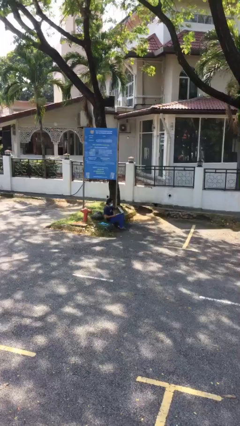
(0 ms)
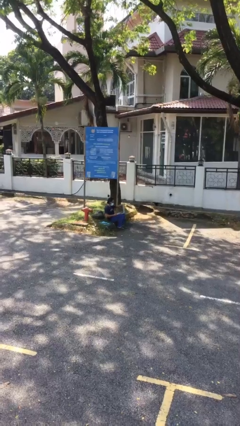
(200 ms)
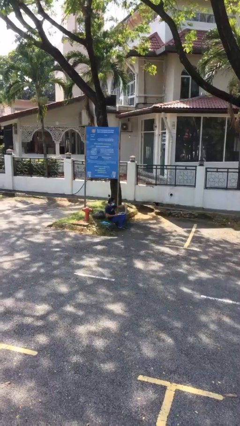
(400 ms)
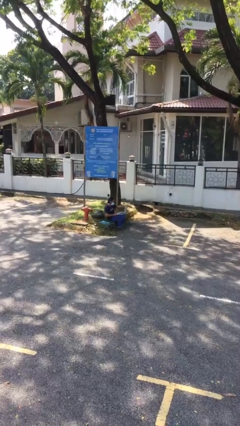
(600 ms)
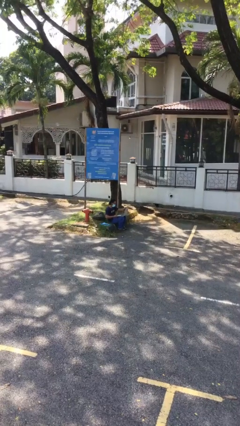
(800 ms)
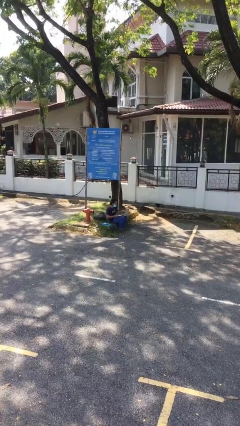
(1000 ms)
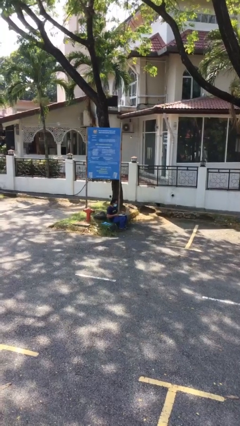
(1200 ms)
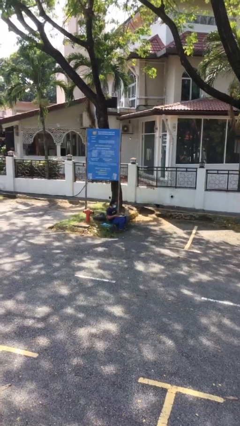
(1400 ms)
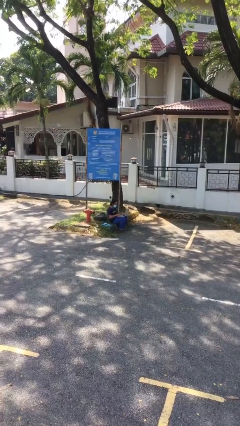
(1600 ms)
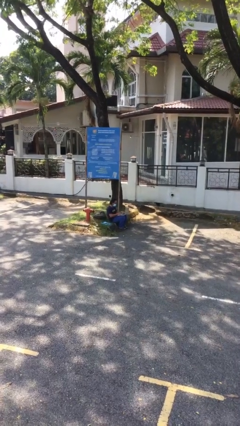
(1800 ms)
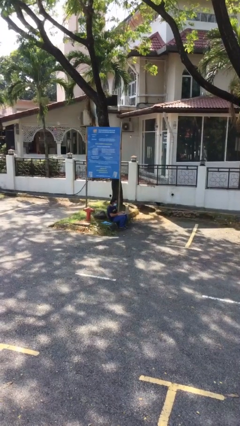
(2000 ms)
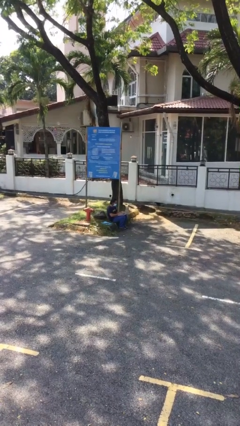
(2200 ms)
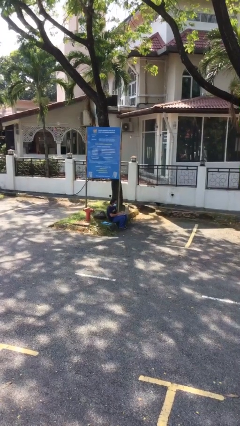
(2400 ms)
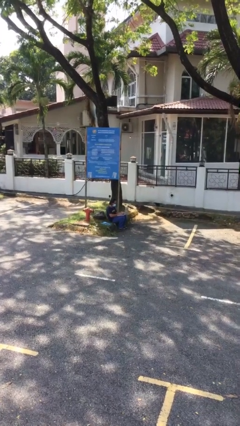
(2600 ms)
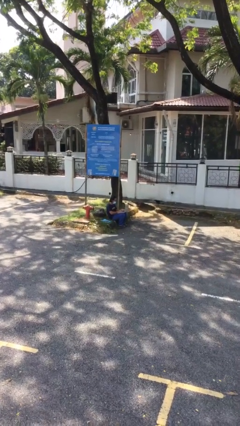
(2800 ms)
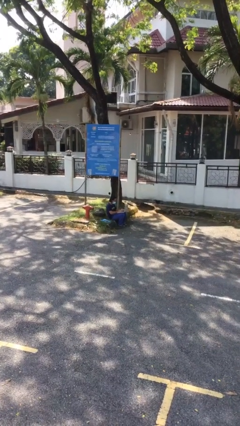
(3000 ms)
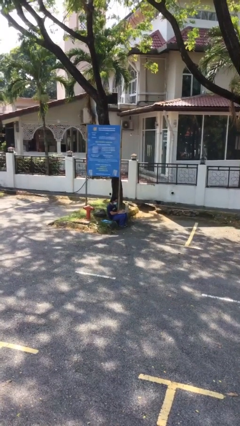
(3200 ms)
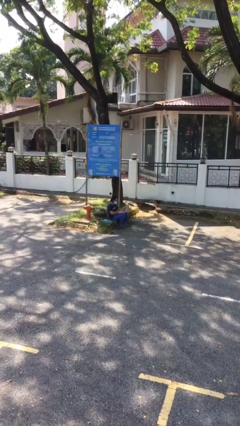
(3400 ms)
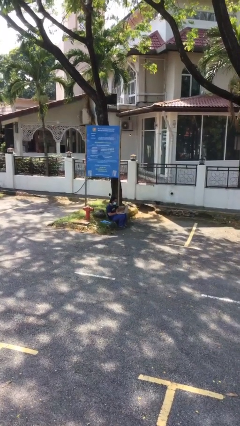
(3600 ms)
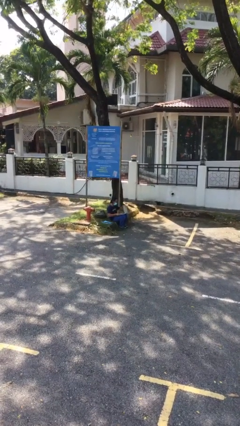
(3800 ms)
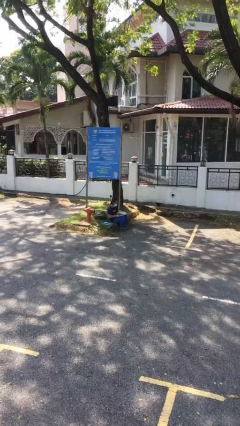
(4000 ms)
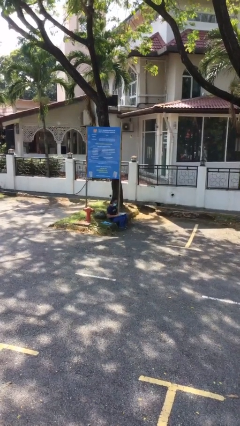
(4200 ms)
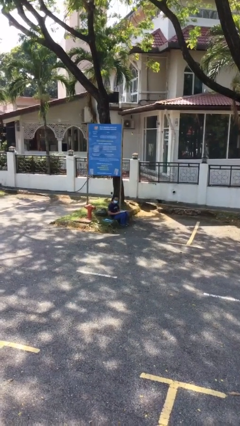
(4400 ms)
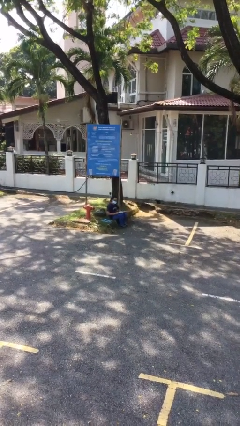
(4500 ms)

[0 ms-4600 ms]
person interacts with laptop

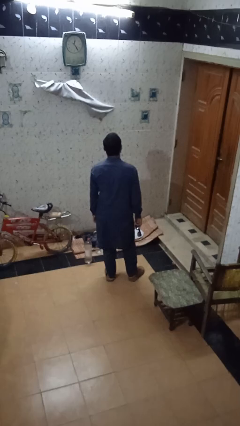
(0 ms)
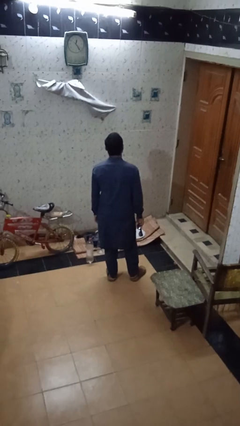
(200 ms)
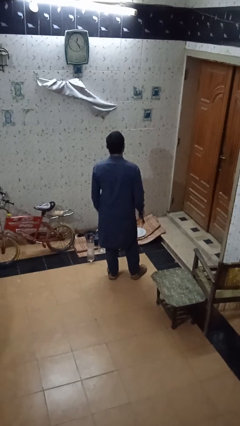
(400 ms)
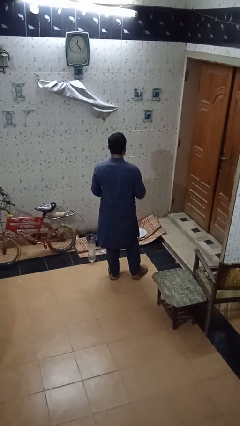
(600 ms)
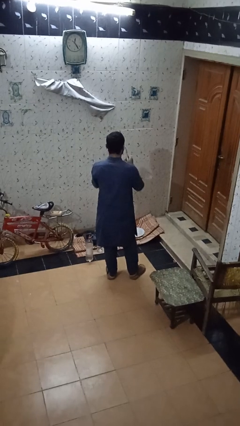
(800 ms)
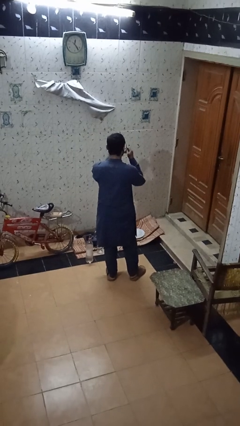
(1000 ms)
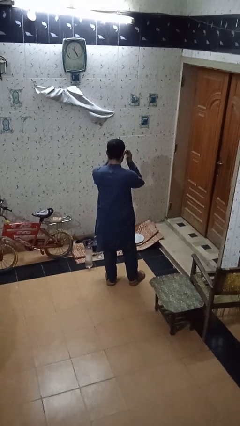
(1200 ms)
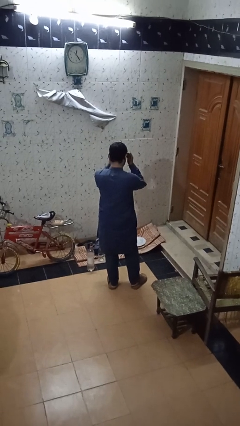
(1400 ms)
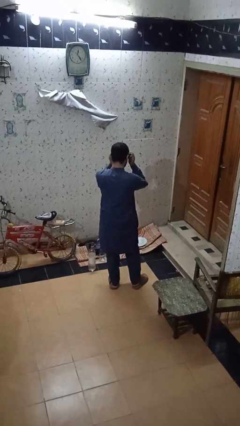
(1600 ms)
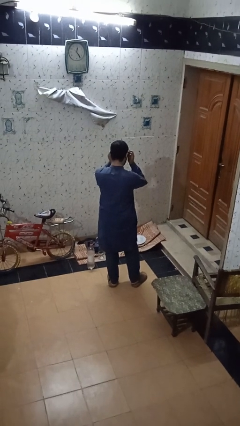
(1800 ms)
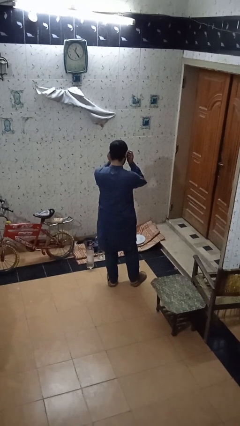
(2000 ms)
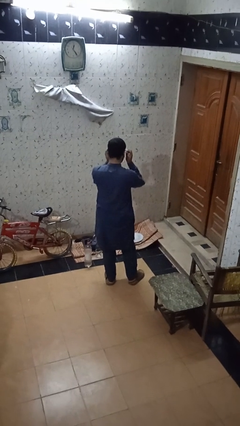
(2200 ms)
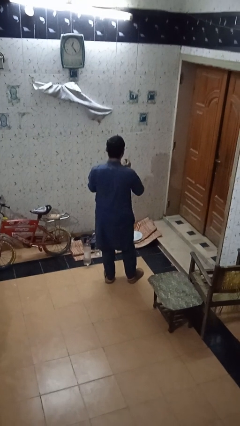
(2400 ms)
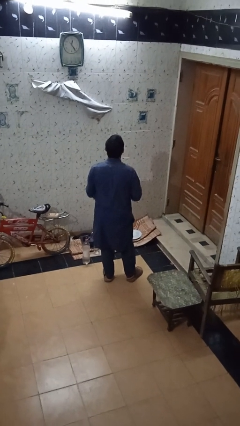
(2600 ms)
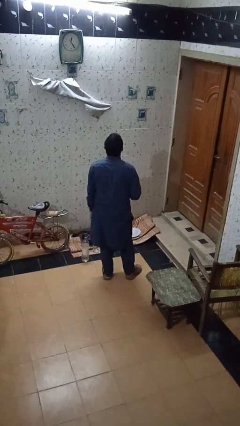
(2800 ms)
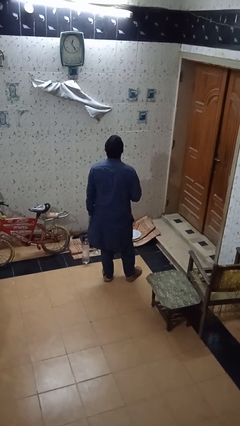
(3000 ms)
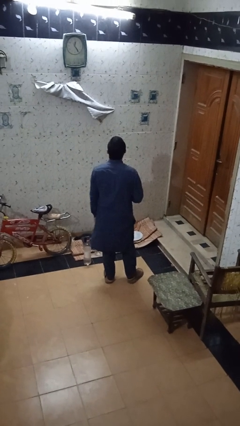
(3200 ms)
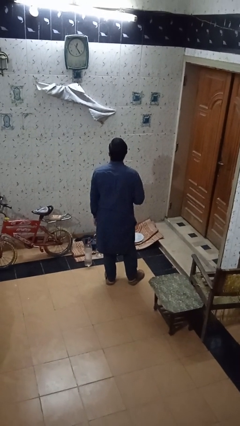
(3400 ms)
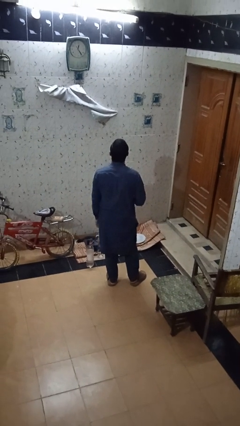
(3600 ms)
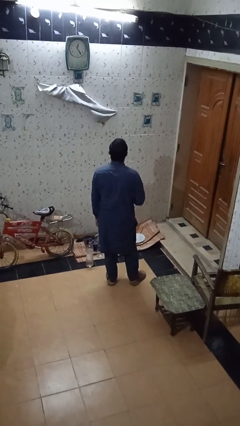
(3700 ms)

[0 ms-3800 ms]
person puts on sunglasses

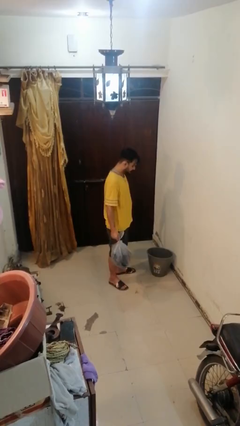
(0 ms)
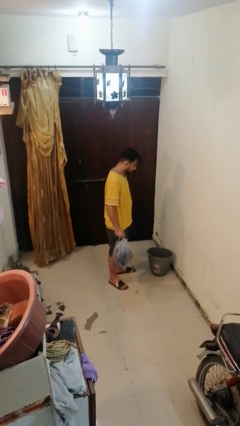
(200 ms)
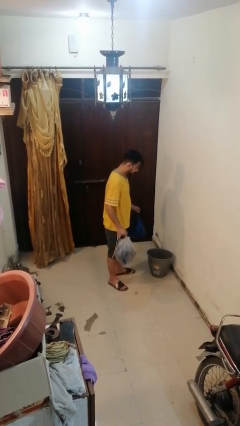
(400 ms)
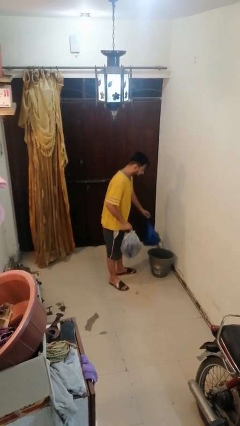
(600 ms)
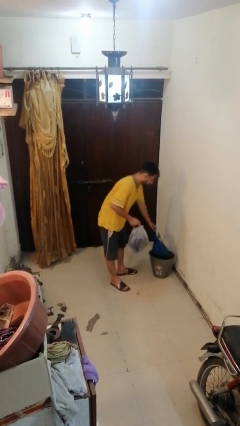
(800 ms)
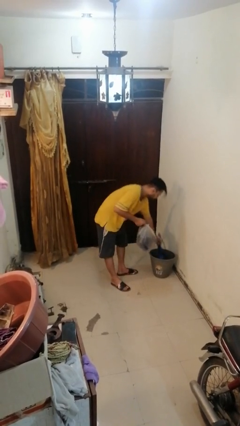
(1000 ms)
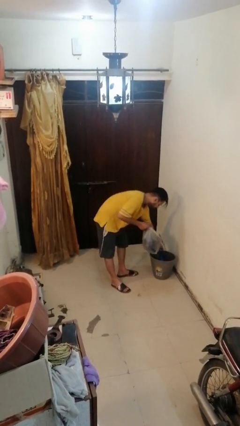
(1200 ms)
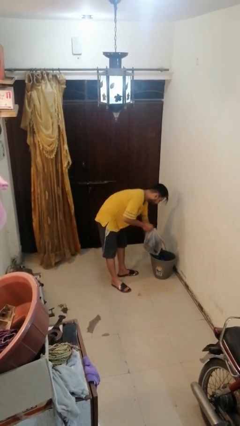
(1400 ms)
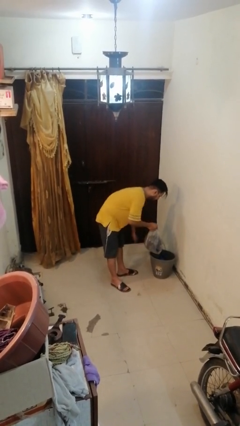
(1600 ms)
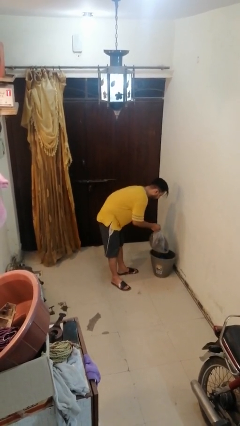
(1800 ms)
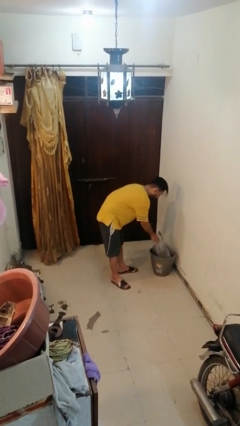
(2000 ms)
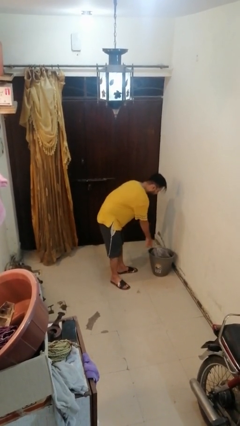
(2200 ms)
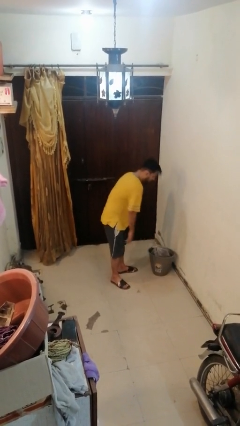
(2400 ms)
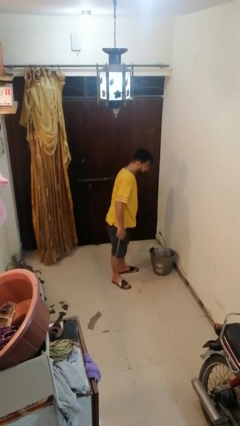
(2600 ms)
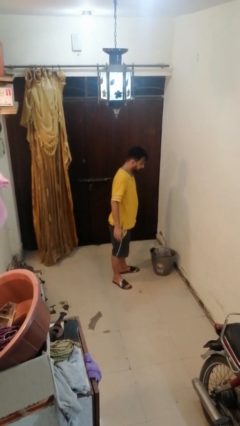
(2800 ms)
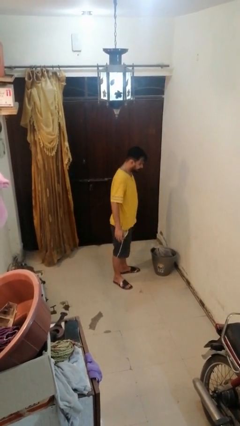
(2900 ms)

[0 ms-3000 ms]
person discards trash

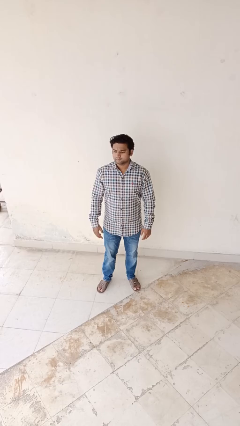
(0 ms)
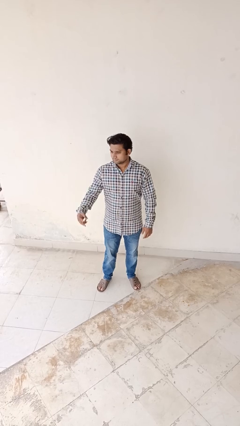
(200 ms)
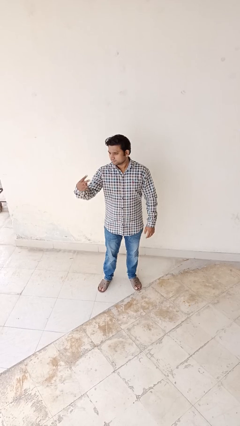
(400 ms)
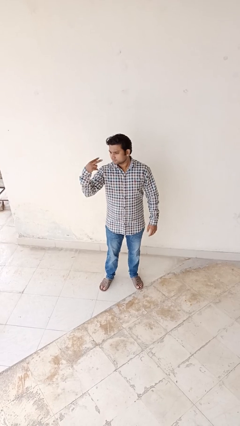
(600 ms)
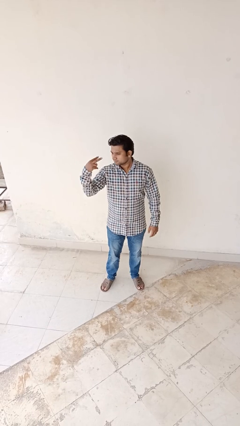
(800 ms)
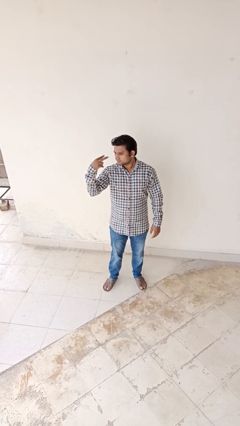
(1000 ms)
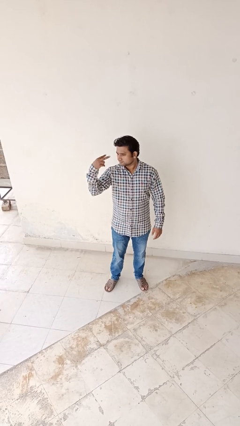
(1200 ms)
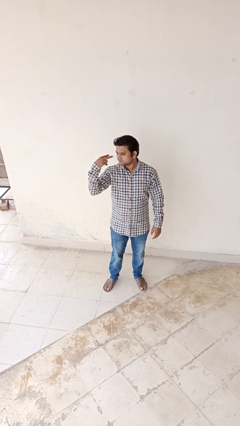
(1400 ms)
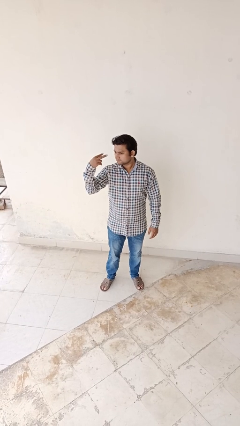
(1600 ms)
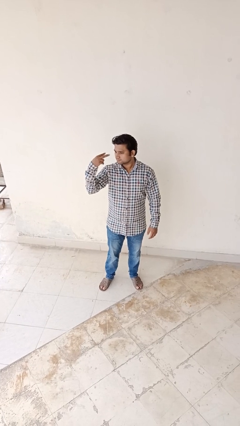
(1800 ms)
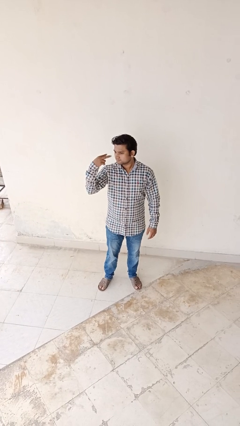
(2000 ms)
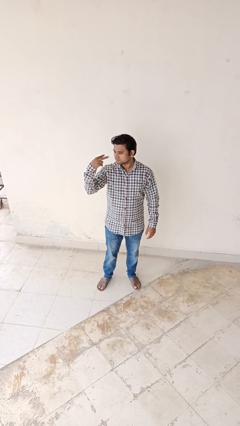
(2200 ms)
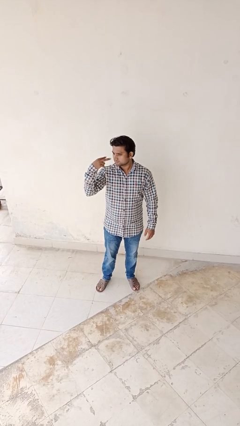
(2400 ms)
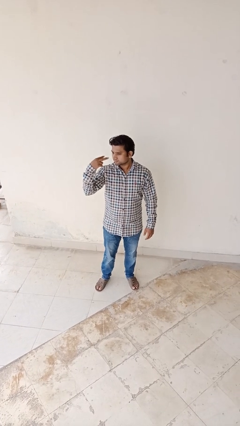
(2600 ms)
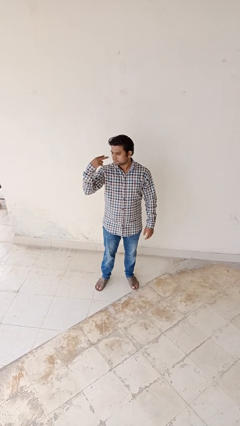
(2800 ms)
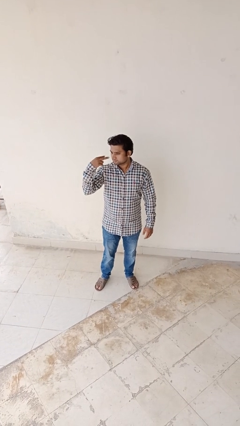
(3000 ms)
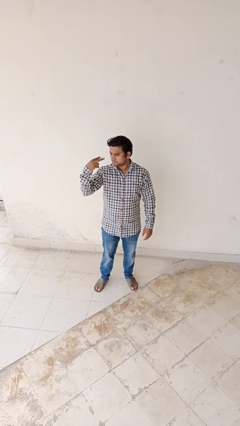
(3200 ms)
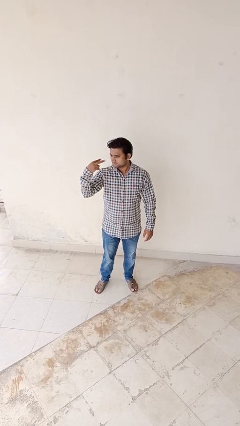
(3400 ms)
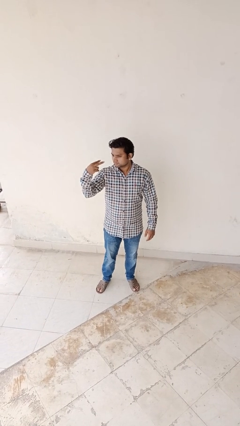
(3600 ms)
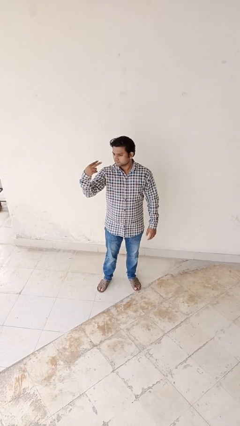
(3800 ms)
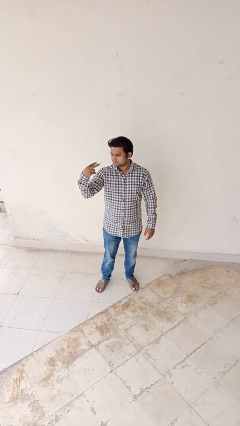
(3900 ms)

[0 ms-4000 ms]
person gestures watch closely

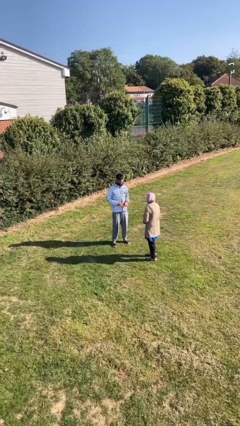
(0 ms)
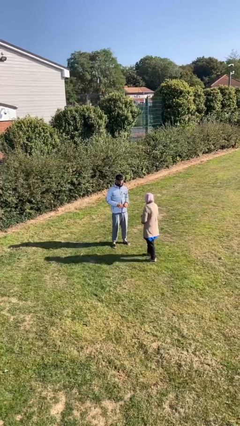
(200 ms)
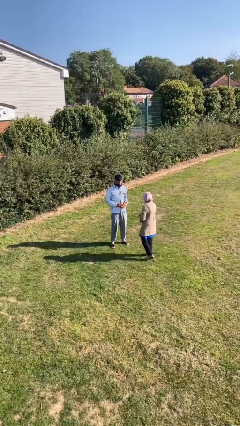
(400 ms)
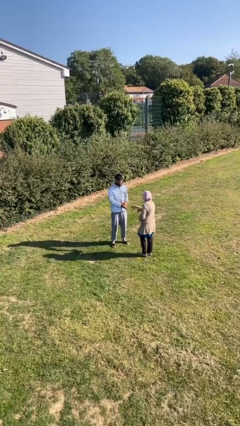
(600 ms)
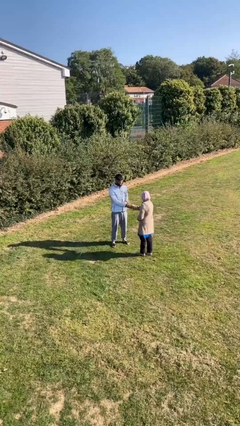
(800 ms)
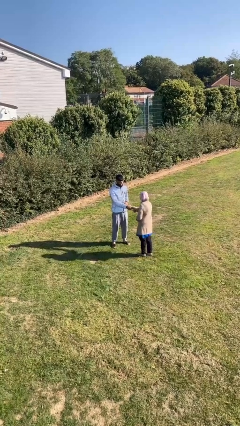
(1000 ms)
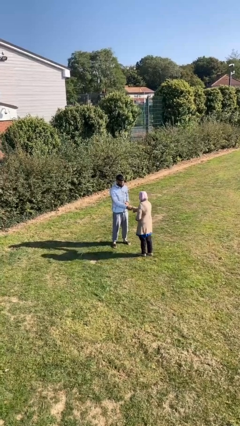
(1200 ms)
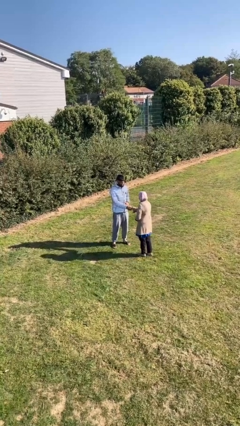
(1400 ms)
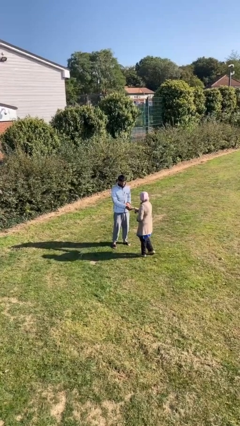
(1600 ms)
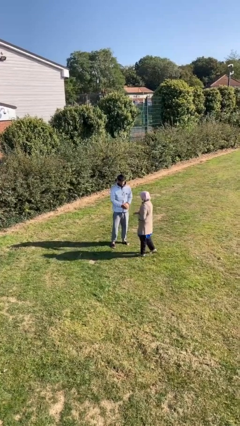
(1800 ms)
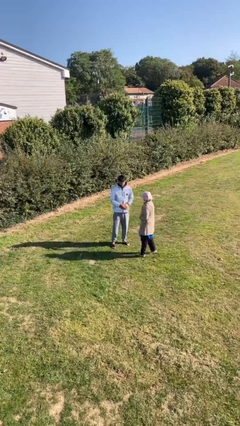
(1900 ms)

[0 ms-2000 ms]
person shakes hand

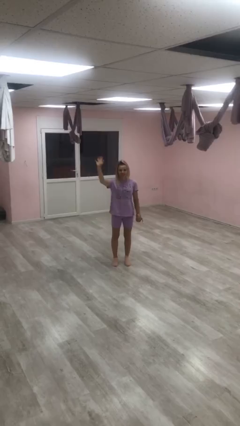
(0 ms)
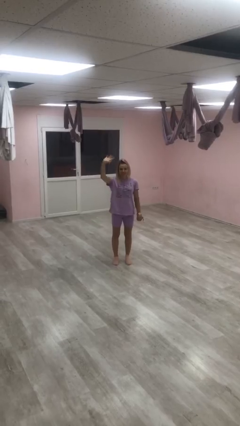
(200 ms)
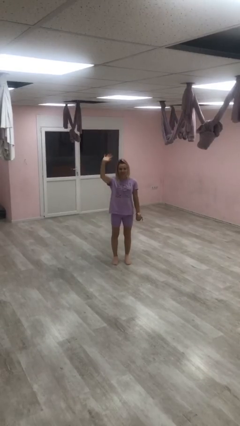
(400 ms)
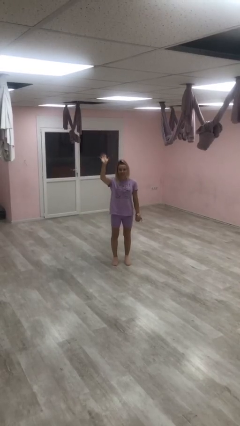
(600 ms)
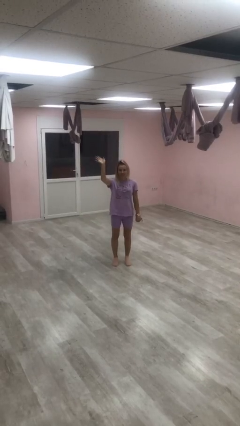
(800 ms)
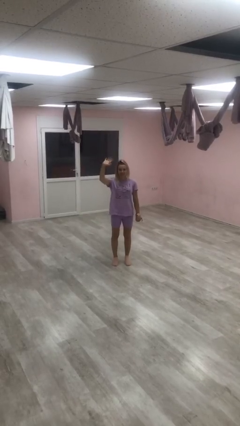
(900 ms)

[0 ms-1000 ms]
person waves at person
